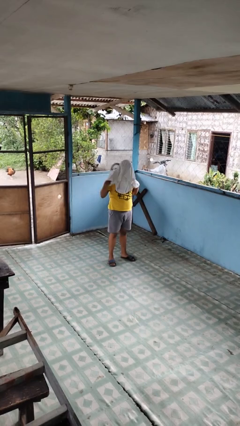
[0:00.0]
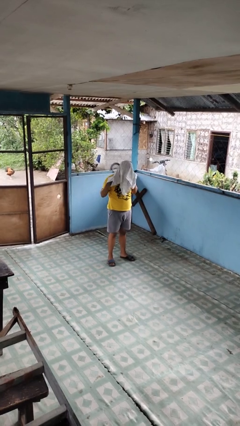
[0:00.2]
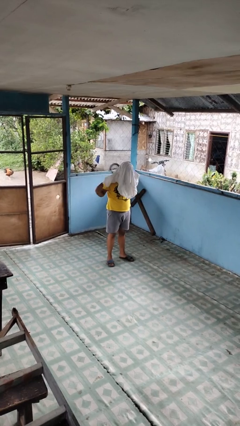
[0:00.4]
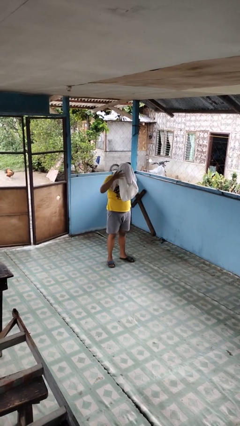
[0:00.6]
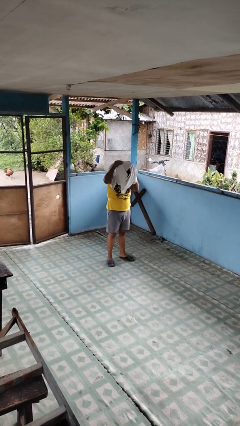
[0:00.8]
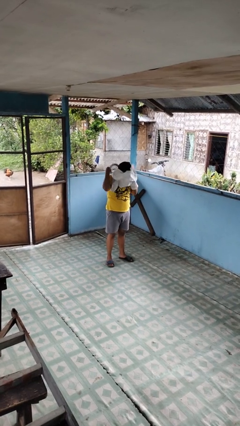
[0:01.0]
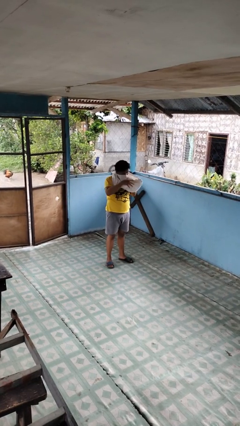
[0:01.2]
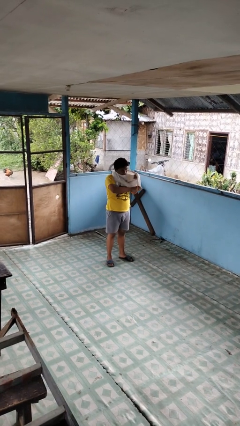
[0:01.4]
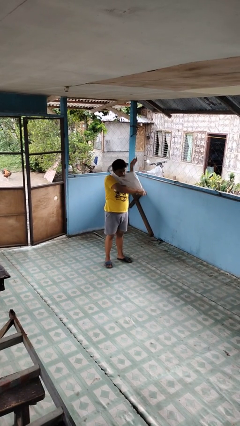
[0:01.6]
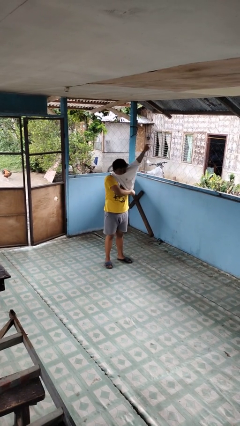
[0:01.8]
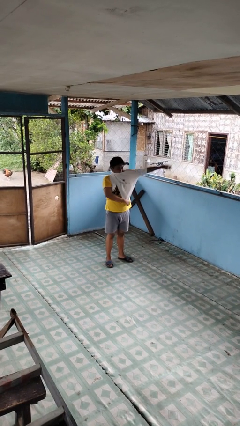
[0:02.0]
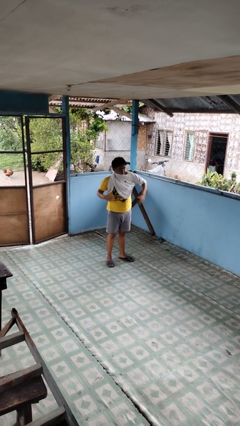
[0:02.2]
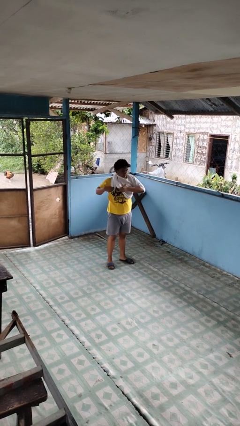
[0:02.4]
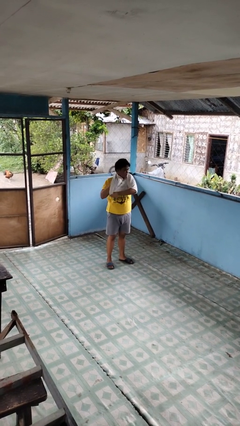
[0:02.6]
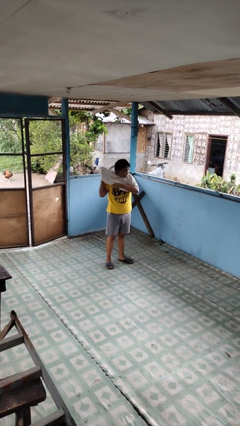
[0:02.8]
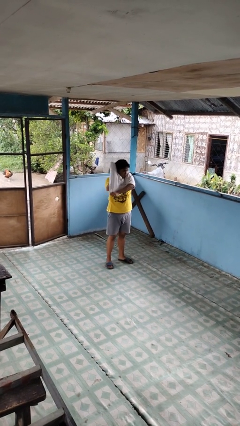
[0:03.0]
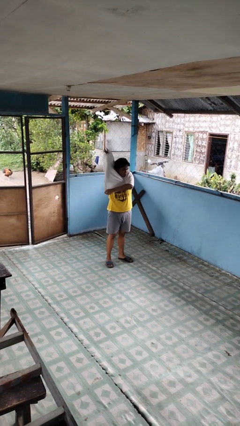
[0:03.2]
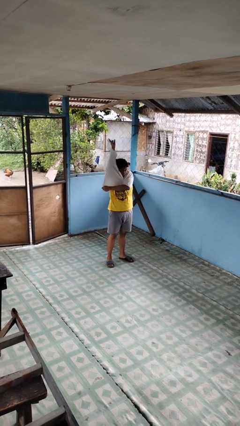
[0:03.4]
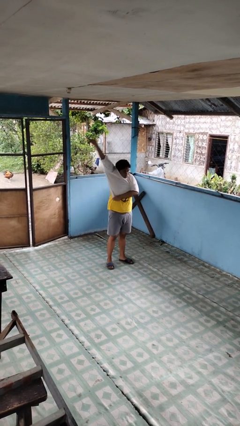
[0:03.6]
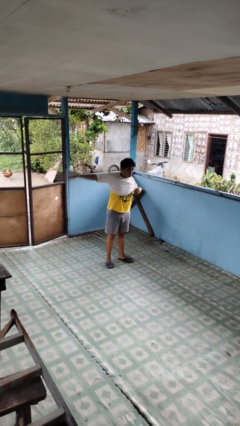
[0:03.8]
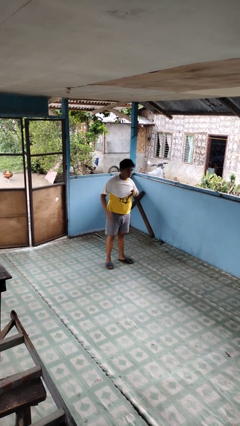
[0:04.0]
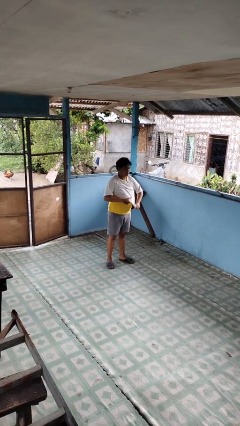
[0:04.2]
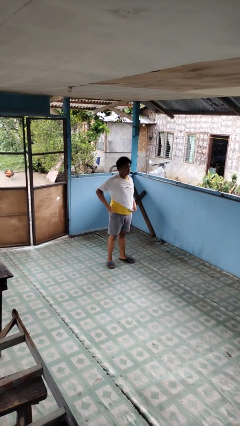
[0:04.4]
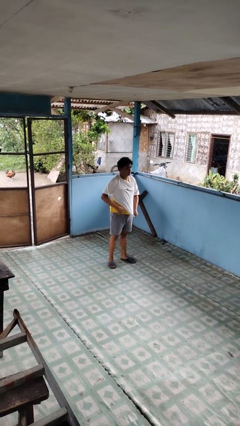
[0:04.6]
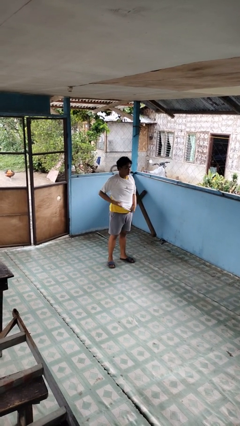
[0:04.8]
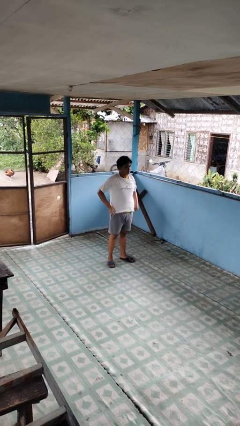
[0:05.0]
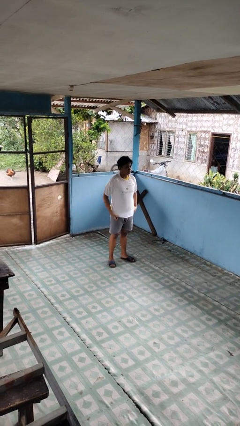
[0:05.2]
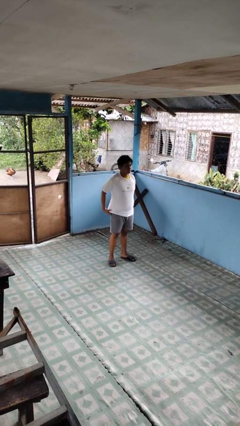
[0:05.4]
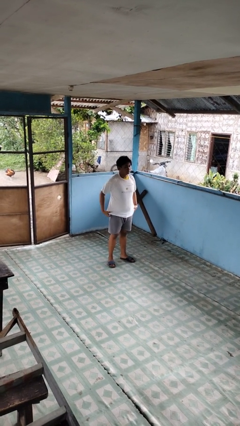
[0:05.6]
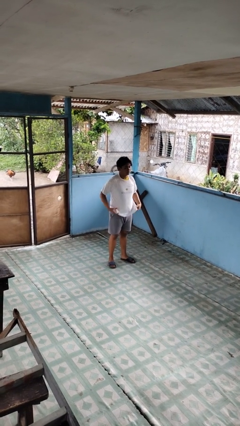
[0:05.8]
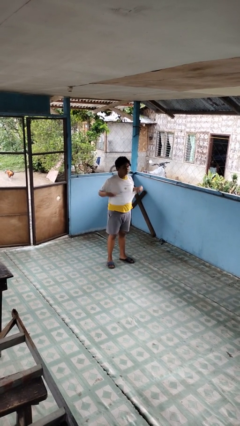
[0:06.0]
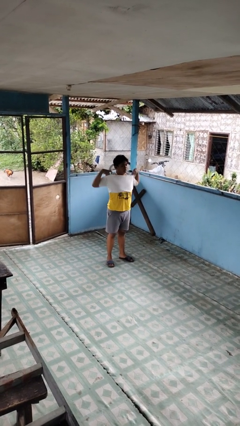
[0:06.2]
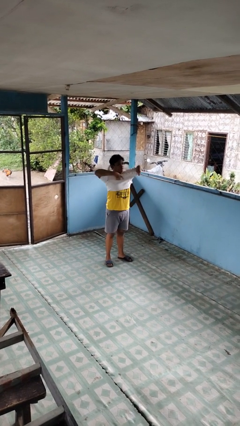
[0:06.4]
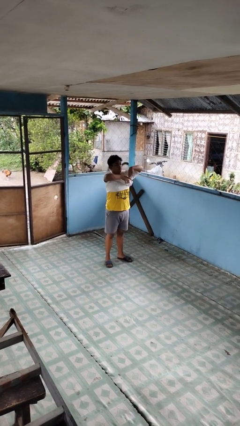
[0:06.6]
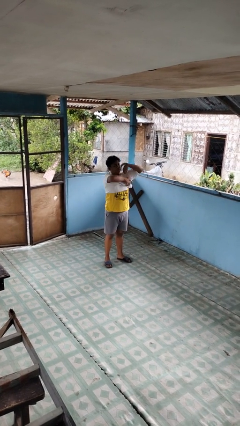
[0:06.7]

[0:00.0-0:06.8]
person puts on shirt

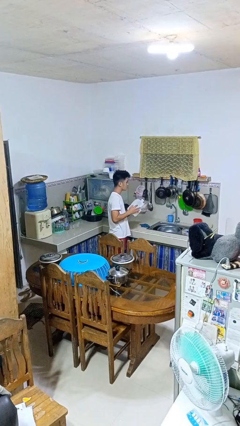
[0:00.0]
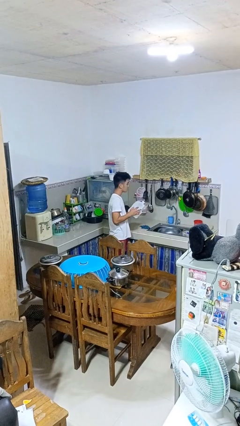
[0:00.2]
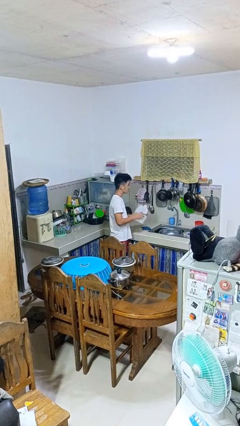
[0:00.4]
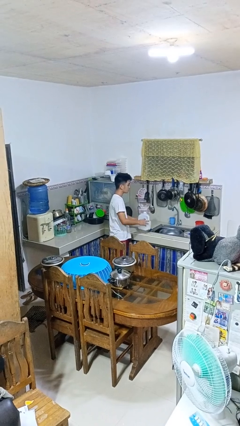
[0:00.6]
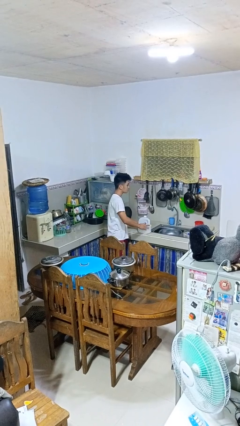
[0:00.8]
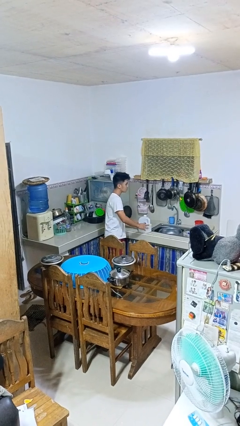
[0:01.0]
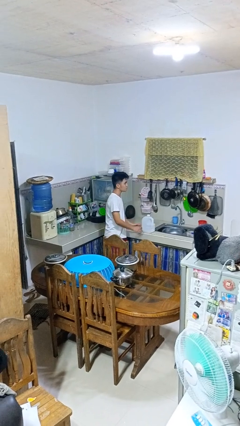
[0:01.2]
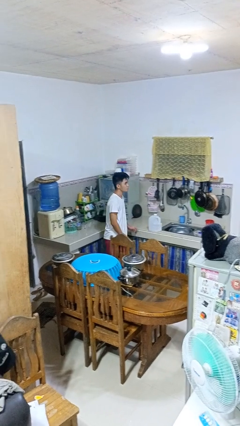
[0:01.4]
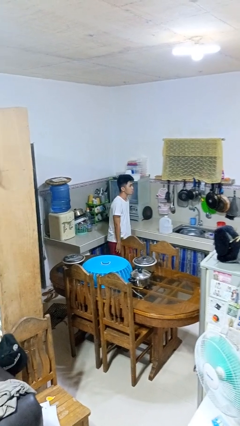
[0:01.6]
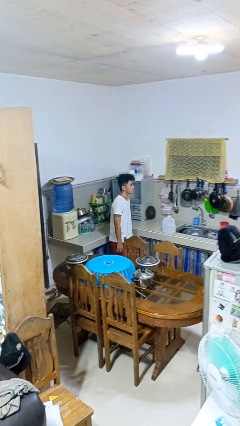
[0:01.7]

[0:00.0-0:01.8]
person puts down object on countertop

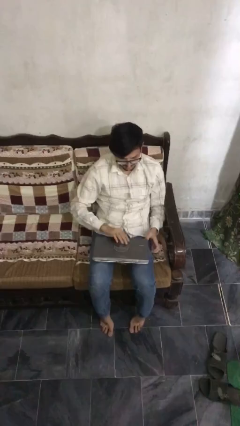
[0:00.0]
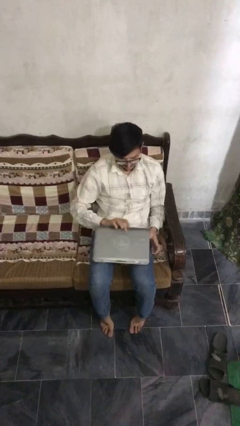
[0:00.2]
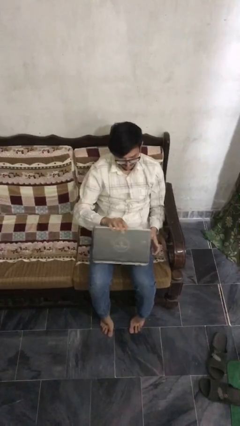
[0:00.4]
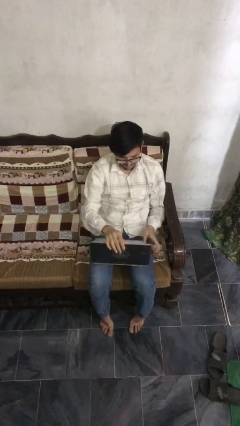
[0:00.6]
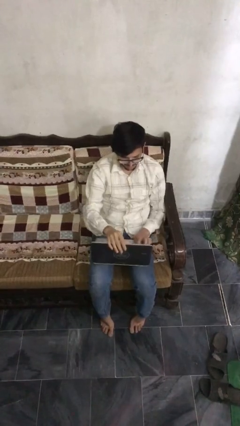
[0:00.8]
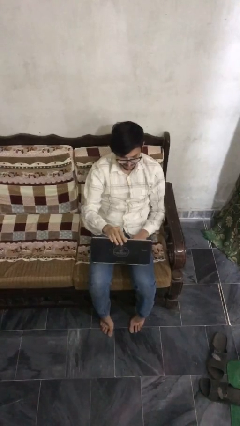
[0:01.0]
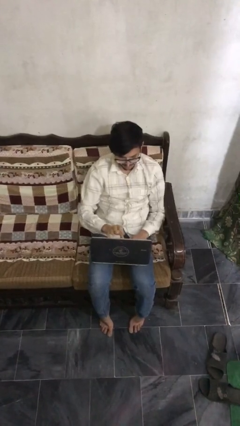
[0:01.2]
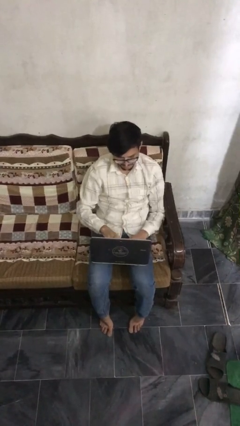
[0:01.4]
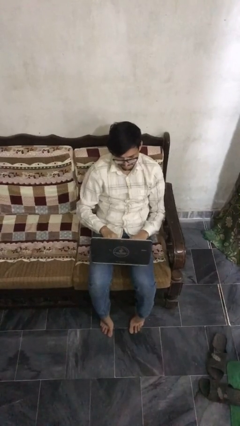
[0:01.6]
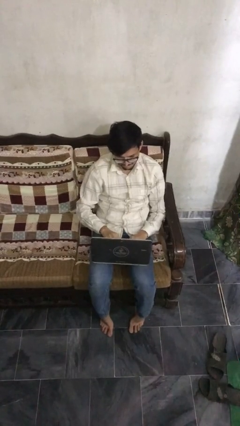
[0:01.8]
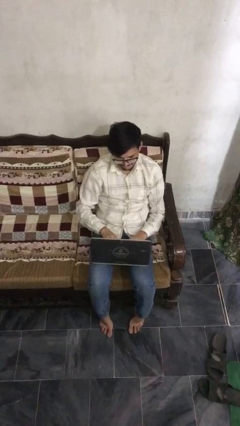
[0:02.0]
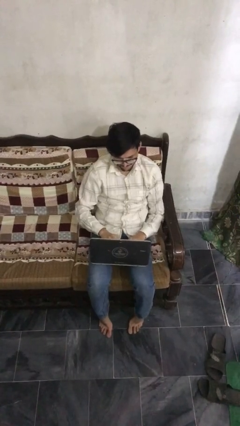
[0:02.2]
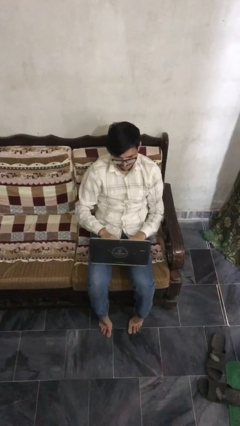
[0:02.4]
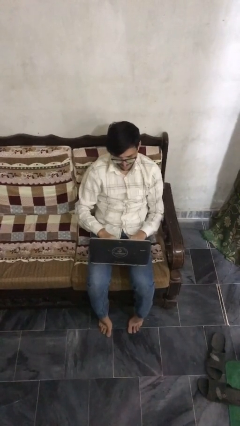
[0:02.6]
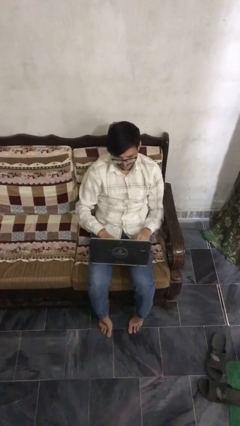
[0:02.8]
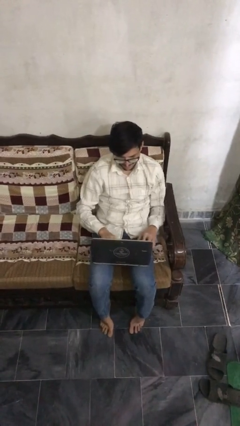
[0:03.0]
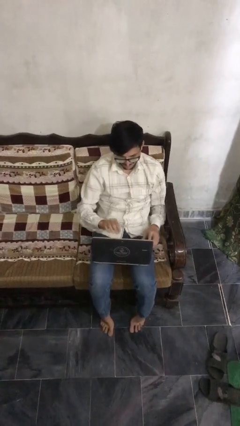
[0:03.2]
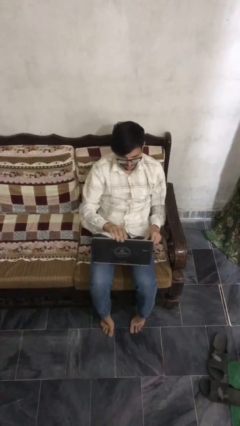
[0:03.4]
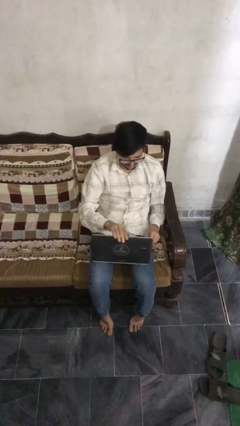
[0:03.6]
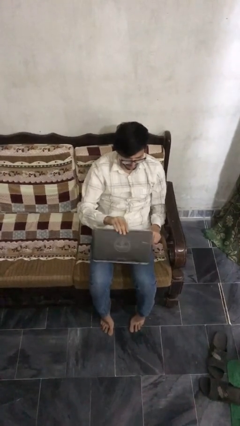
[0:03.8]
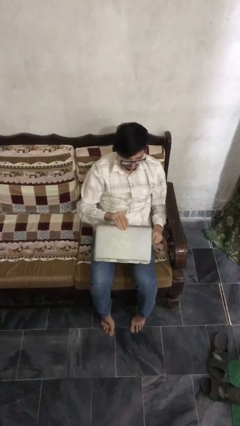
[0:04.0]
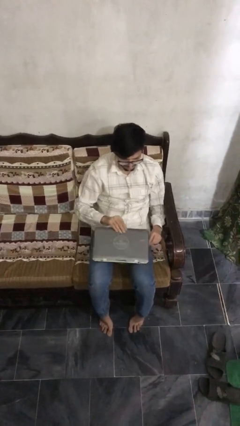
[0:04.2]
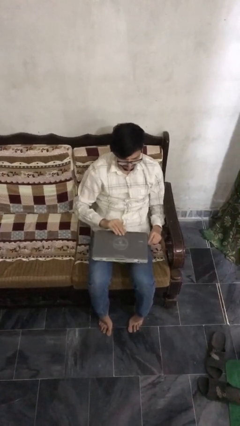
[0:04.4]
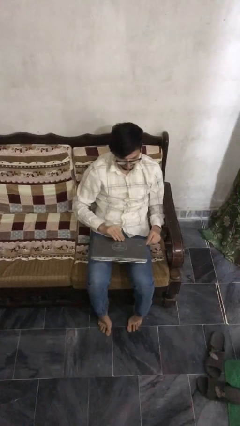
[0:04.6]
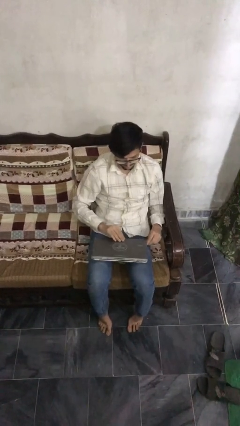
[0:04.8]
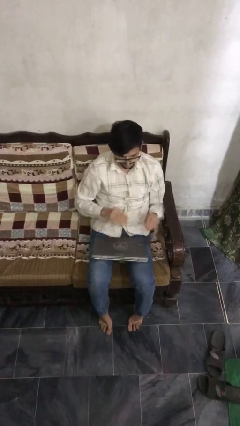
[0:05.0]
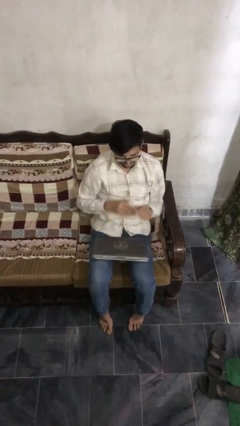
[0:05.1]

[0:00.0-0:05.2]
person interacts with laptop

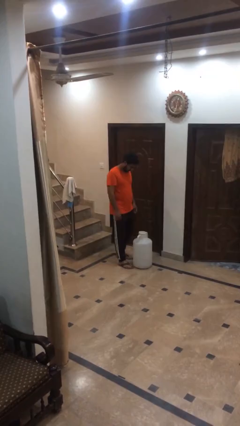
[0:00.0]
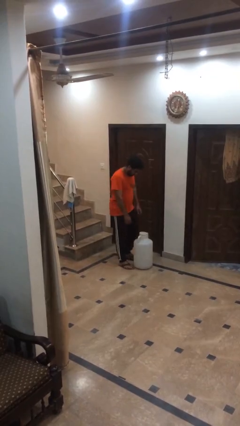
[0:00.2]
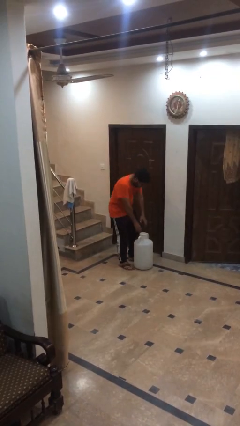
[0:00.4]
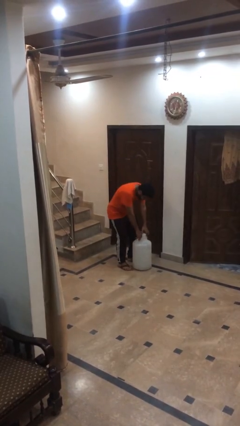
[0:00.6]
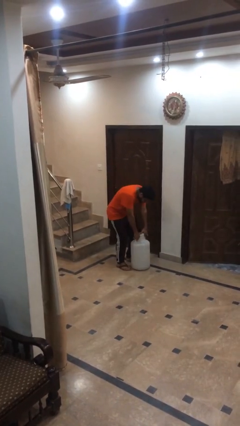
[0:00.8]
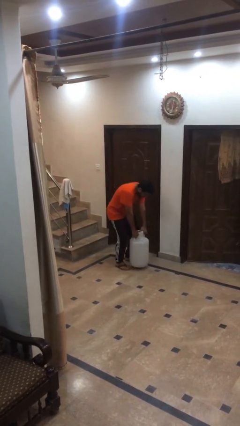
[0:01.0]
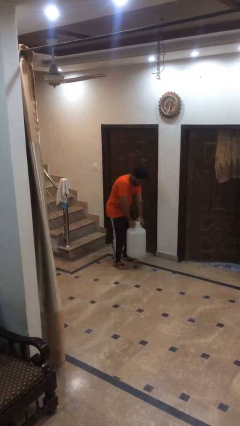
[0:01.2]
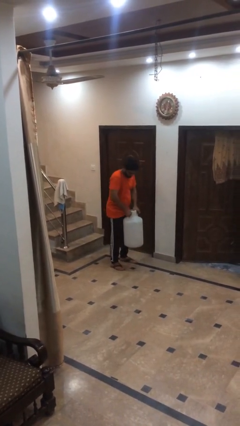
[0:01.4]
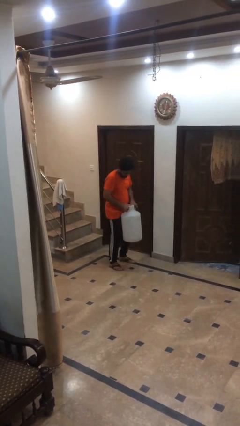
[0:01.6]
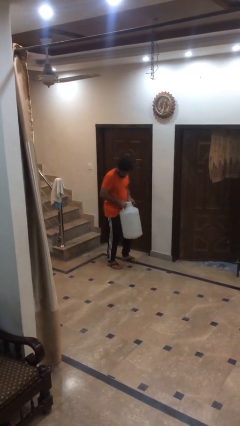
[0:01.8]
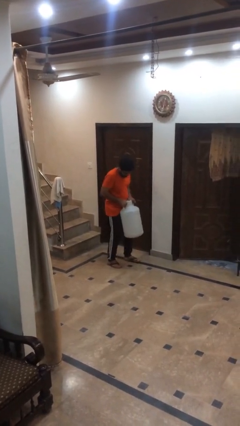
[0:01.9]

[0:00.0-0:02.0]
person picks up object from floor

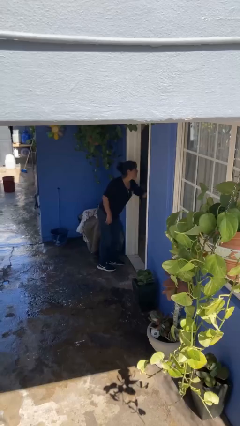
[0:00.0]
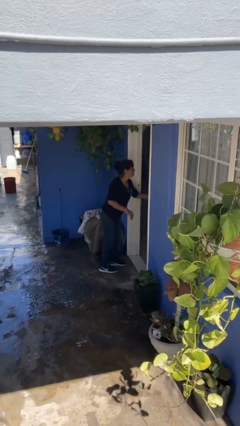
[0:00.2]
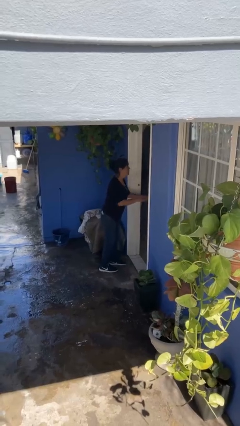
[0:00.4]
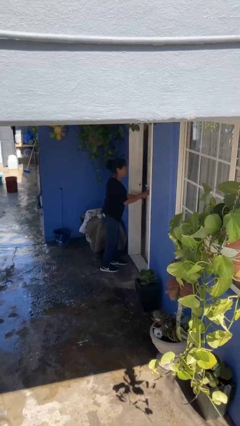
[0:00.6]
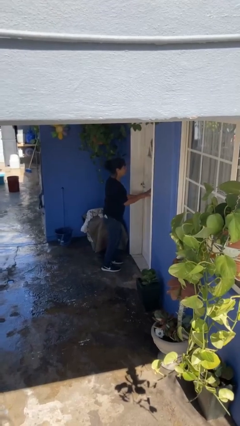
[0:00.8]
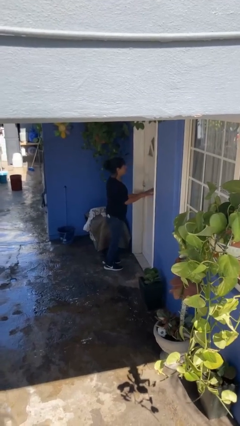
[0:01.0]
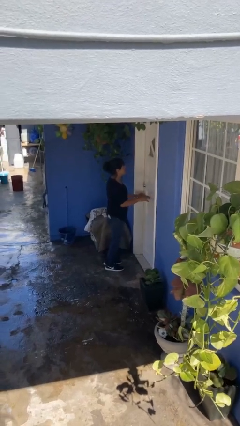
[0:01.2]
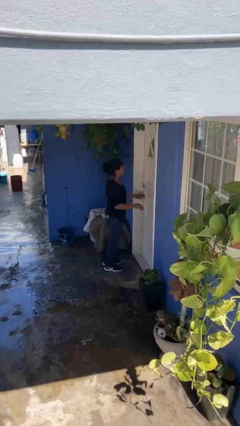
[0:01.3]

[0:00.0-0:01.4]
person closes facility door

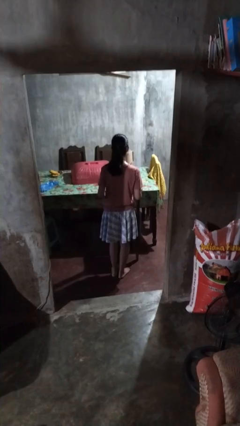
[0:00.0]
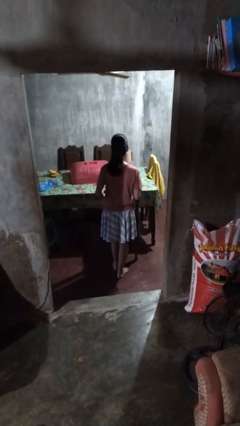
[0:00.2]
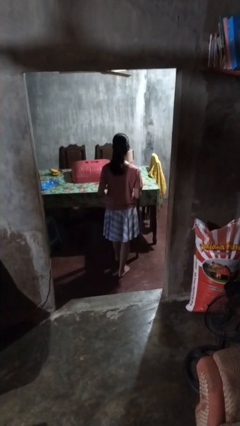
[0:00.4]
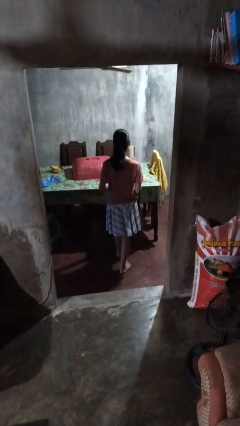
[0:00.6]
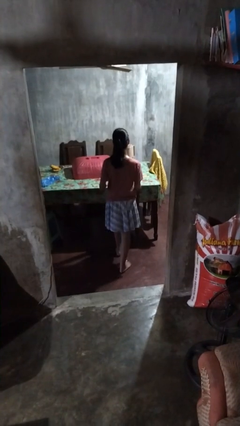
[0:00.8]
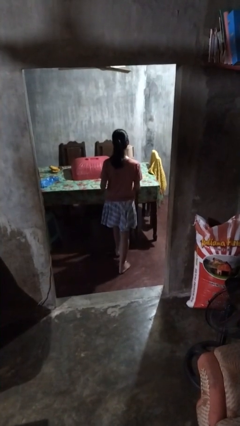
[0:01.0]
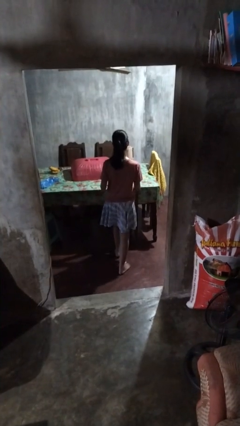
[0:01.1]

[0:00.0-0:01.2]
person pushes in chair
